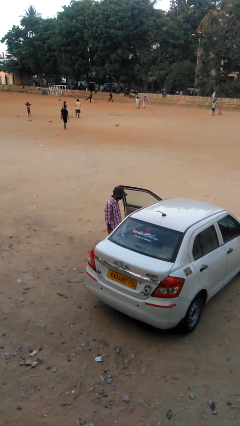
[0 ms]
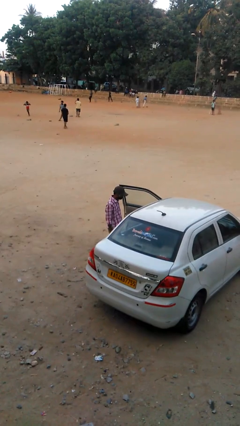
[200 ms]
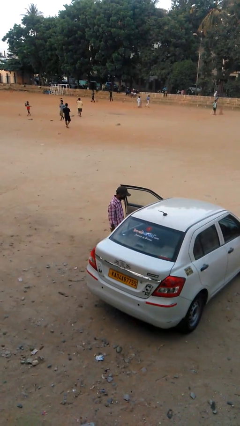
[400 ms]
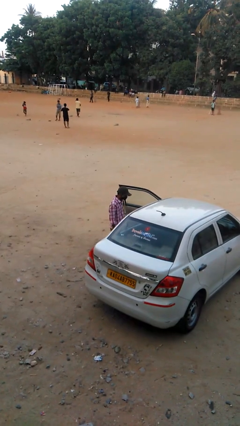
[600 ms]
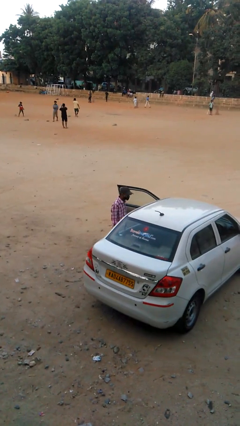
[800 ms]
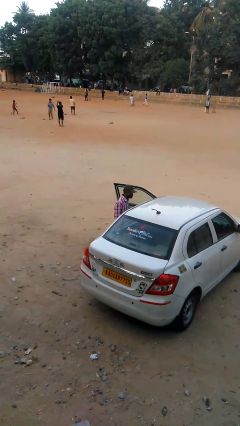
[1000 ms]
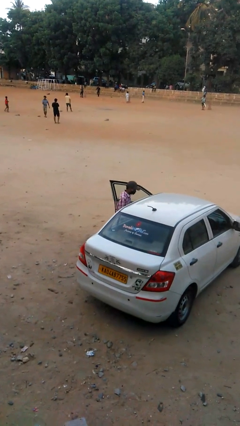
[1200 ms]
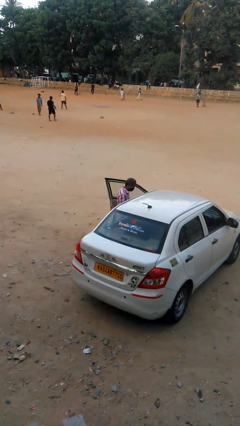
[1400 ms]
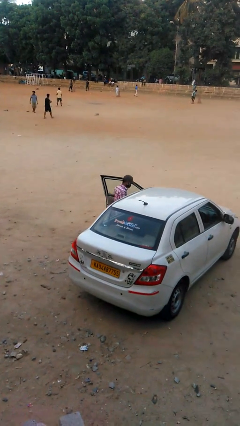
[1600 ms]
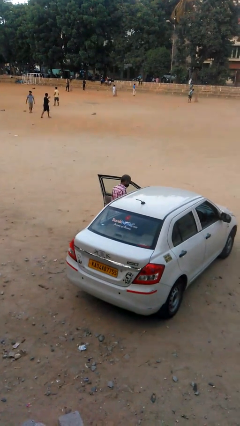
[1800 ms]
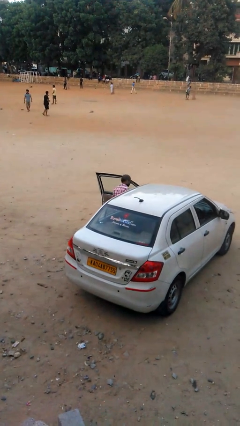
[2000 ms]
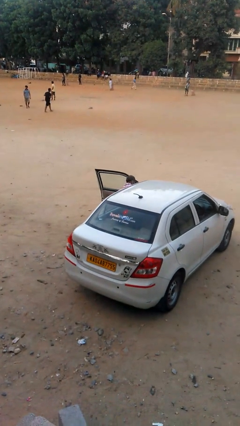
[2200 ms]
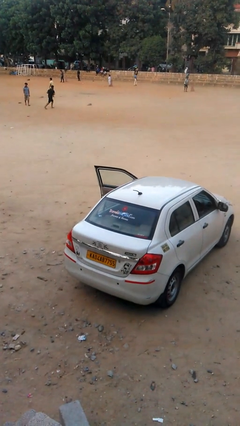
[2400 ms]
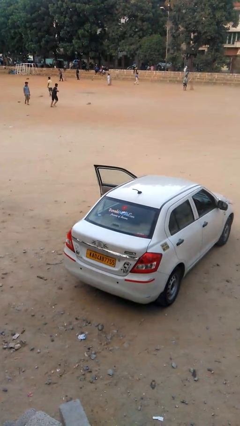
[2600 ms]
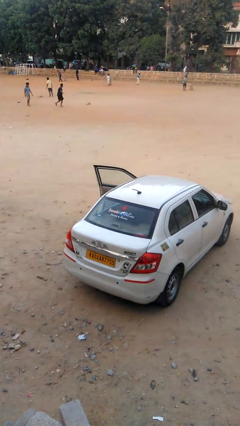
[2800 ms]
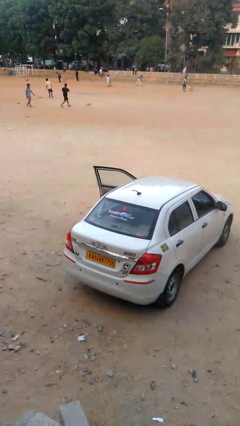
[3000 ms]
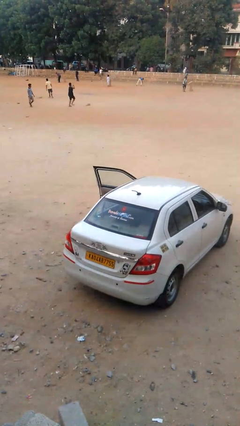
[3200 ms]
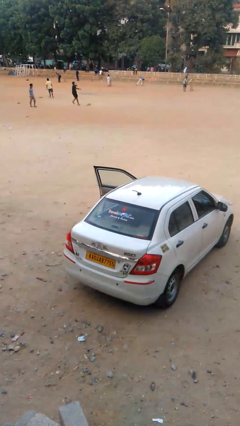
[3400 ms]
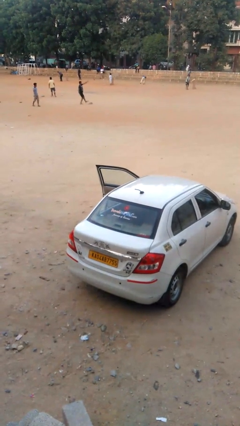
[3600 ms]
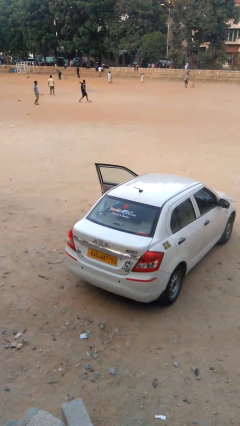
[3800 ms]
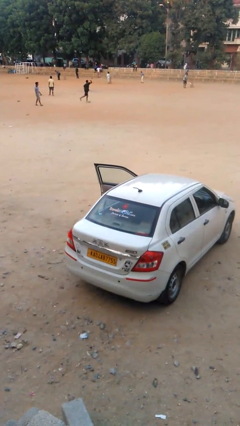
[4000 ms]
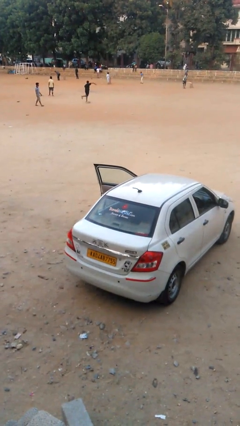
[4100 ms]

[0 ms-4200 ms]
person enters car

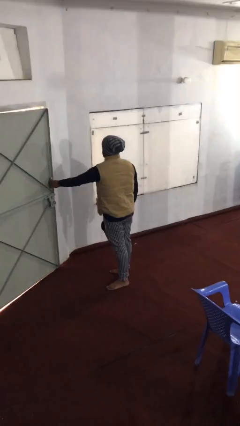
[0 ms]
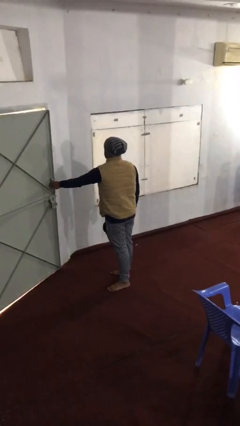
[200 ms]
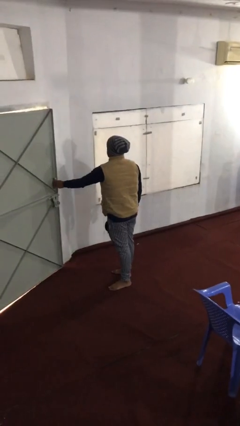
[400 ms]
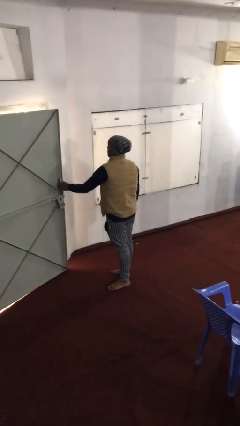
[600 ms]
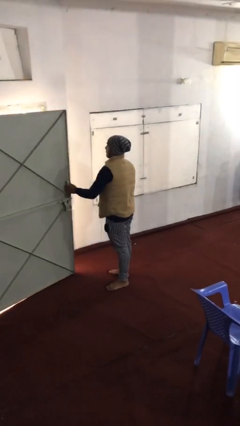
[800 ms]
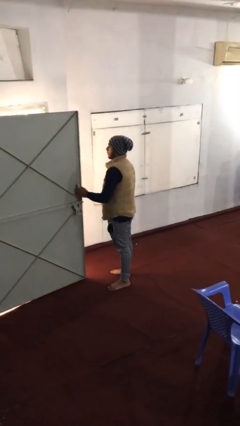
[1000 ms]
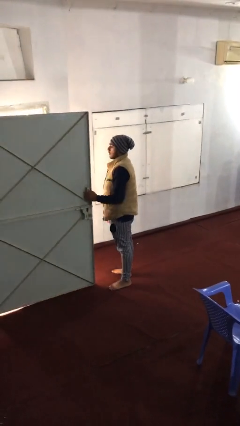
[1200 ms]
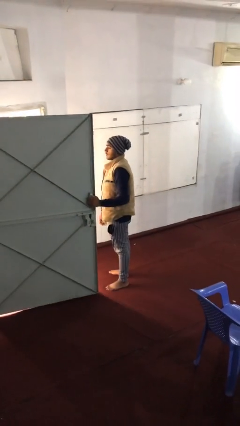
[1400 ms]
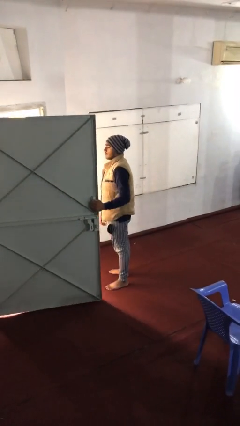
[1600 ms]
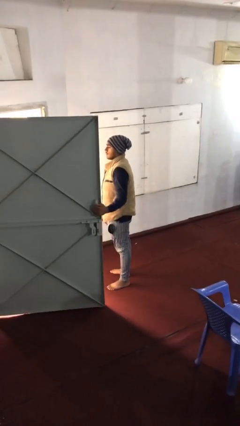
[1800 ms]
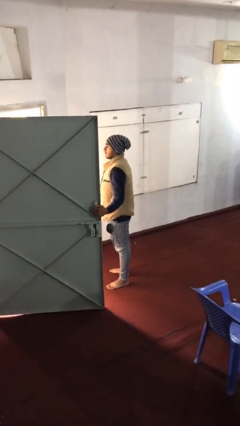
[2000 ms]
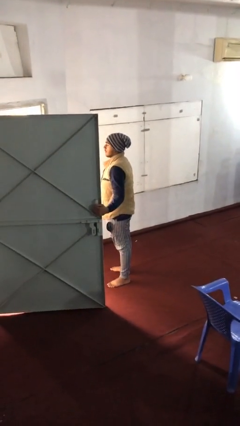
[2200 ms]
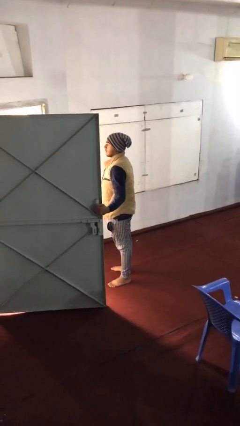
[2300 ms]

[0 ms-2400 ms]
person opens facility door

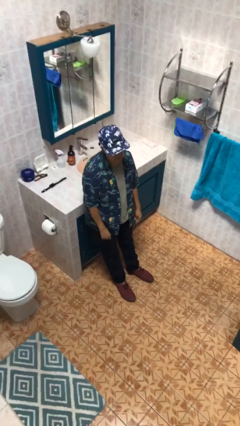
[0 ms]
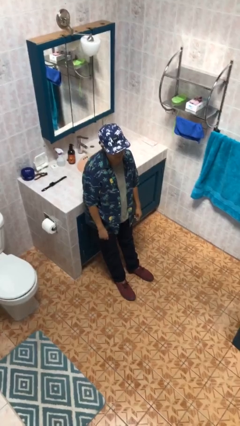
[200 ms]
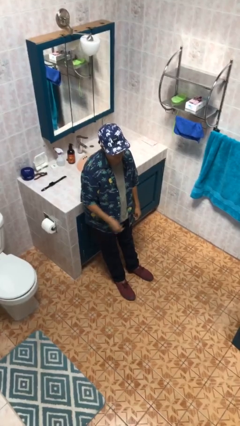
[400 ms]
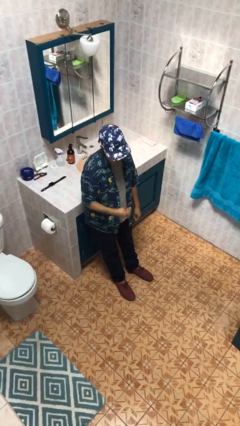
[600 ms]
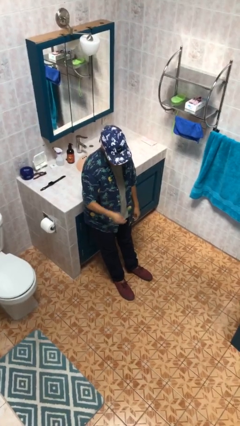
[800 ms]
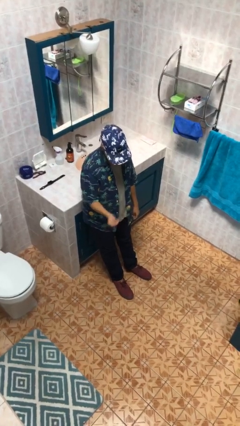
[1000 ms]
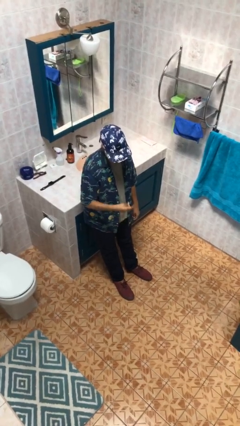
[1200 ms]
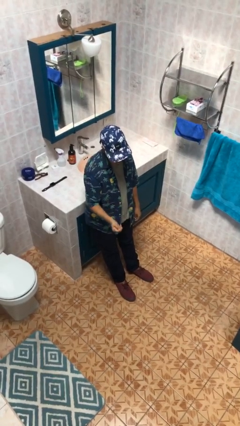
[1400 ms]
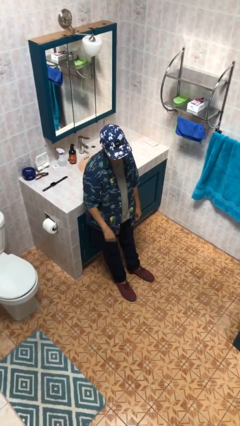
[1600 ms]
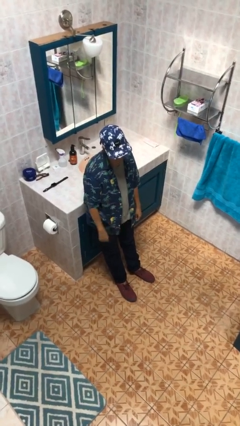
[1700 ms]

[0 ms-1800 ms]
person snaps fingers

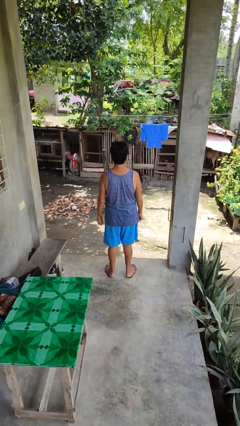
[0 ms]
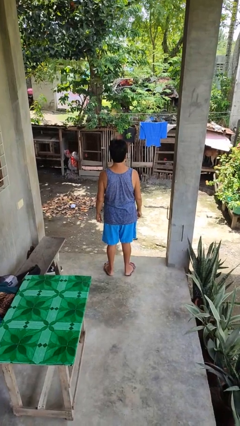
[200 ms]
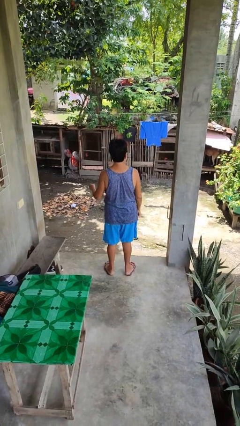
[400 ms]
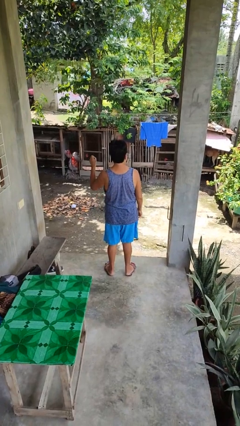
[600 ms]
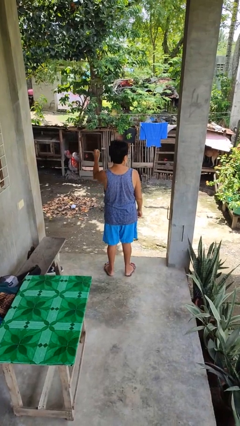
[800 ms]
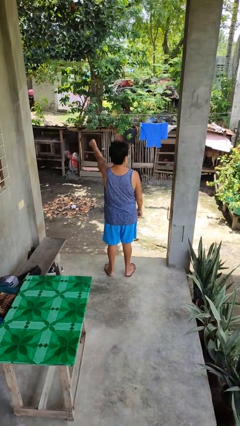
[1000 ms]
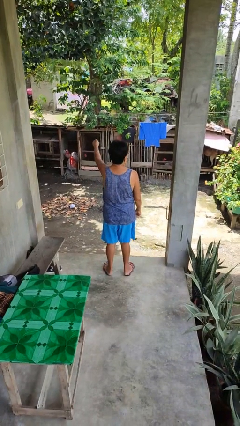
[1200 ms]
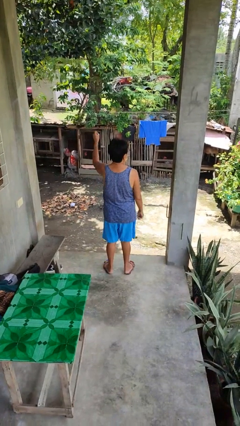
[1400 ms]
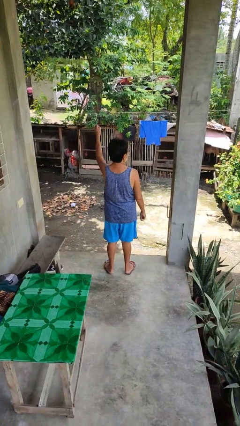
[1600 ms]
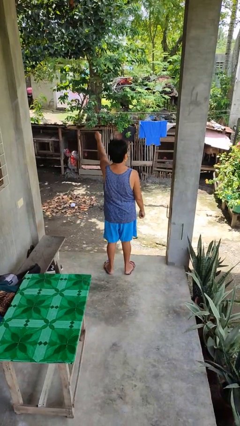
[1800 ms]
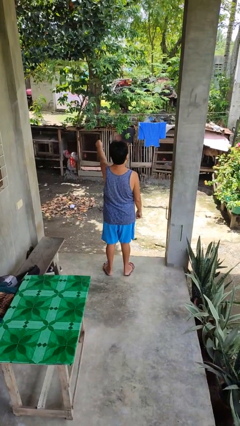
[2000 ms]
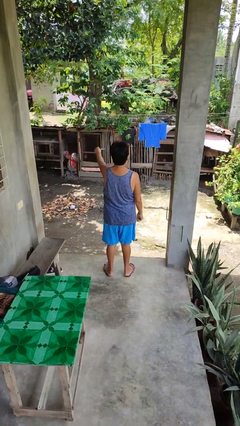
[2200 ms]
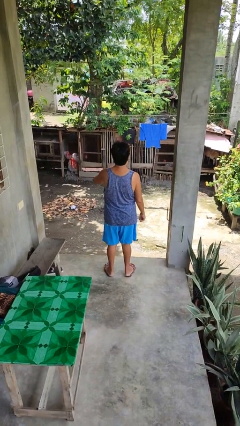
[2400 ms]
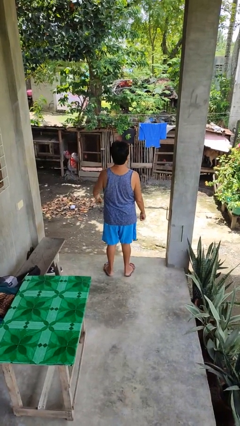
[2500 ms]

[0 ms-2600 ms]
person punches

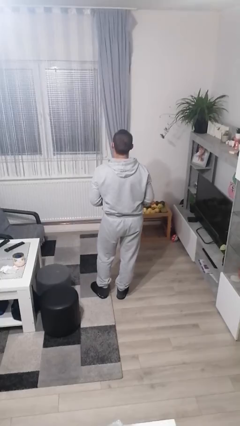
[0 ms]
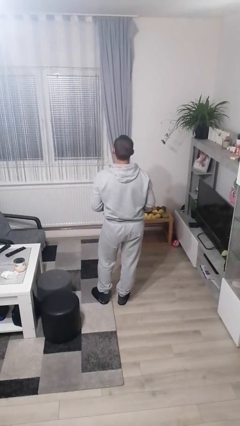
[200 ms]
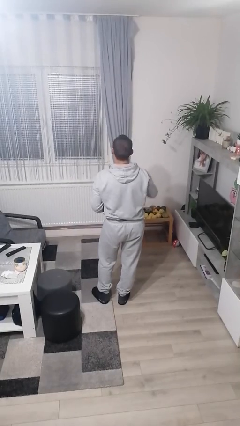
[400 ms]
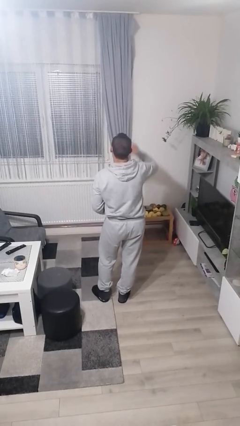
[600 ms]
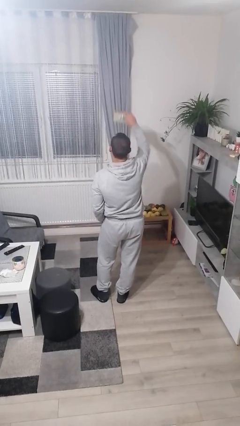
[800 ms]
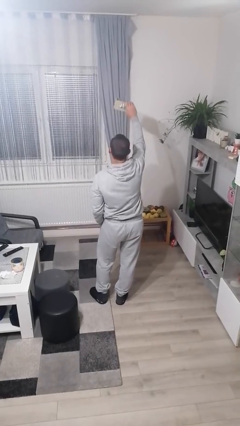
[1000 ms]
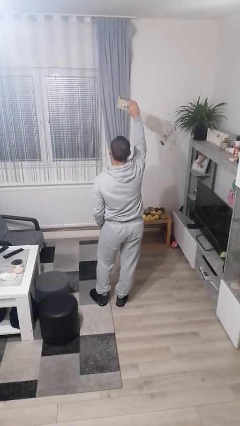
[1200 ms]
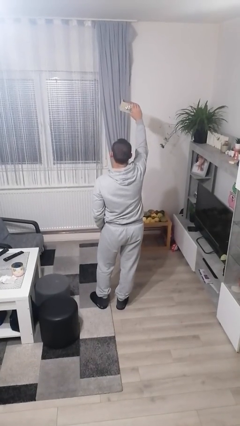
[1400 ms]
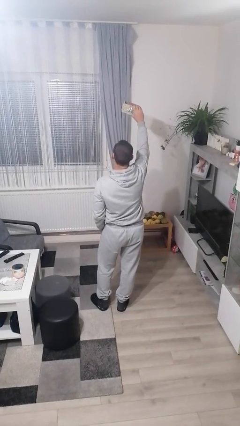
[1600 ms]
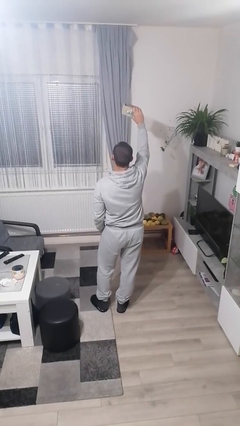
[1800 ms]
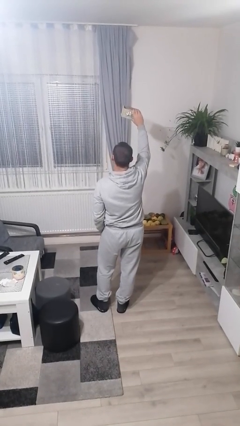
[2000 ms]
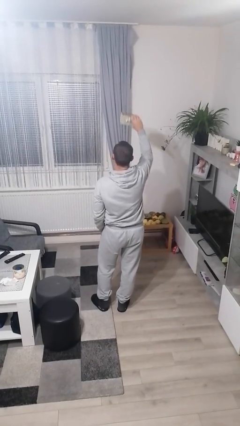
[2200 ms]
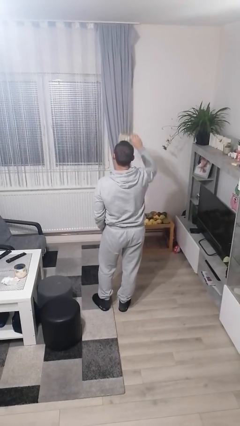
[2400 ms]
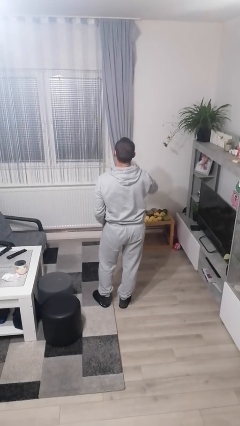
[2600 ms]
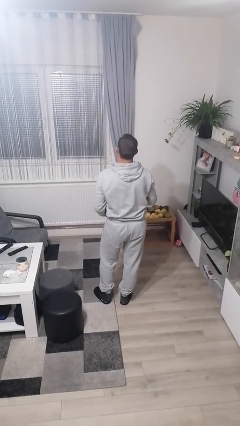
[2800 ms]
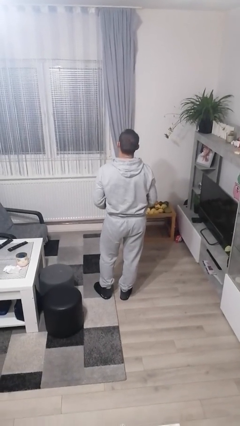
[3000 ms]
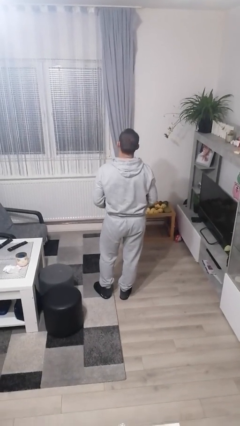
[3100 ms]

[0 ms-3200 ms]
person holds object above head

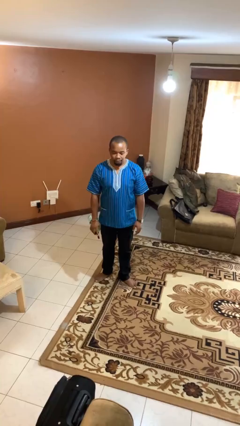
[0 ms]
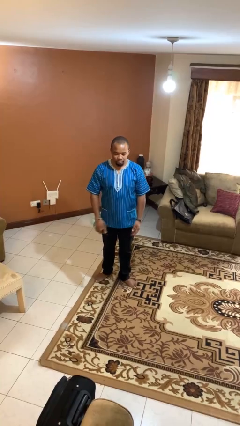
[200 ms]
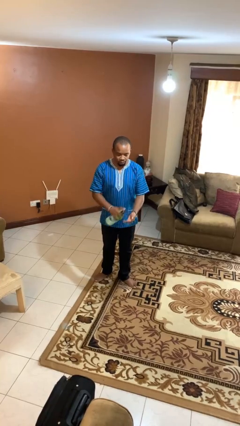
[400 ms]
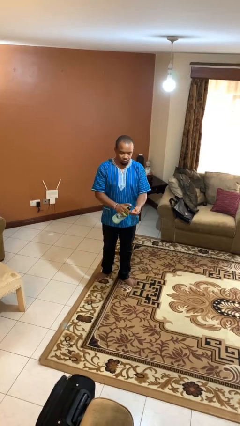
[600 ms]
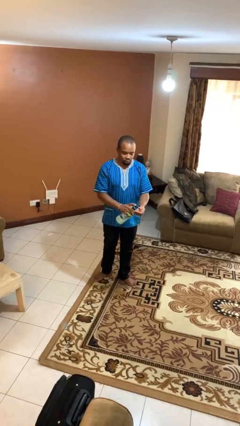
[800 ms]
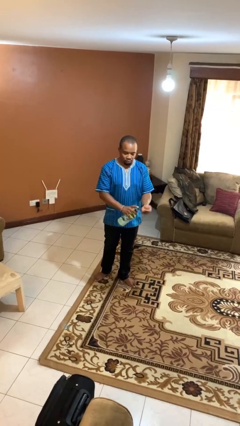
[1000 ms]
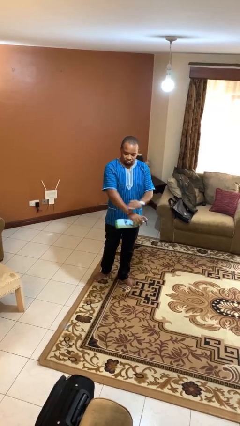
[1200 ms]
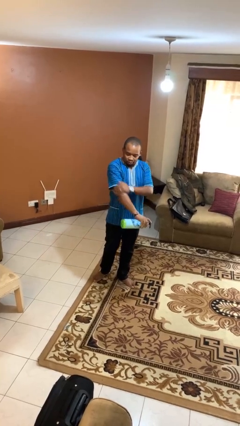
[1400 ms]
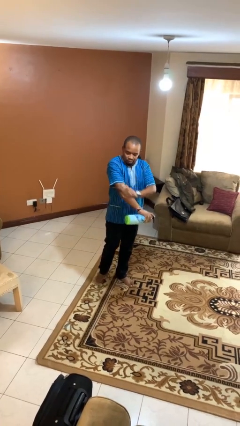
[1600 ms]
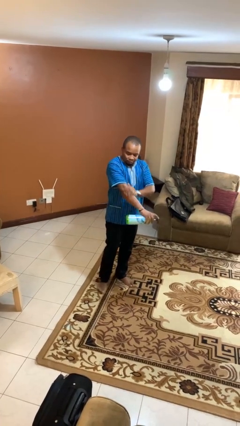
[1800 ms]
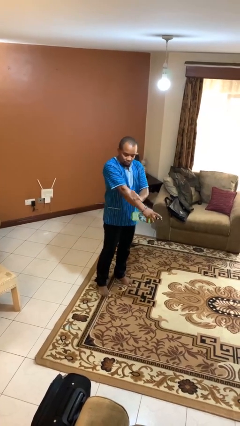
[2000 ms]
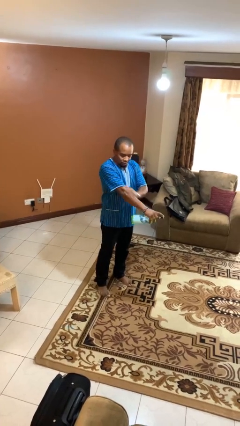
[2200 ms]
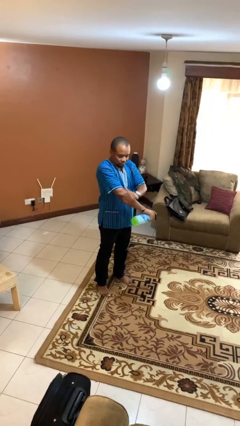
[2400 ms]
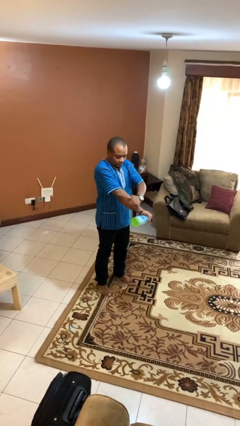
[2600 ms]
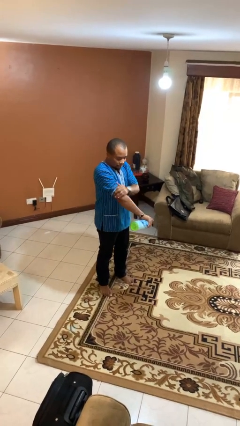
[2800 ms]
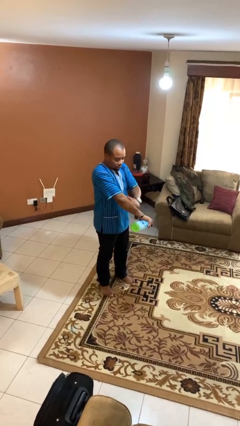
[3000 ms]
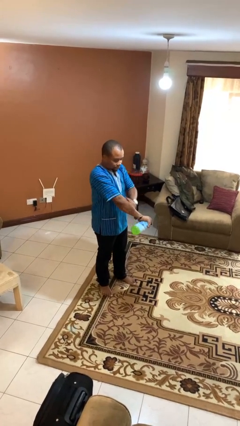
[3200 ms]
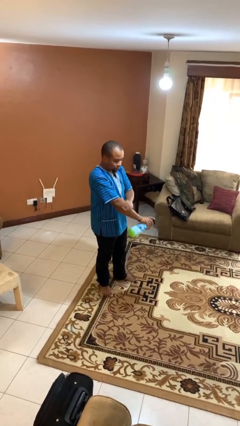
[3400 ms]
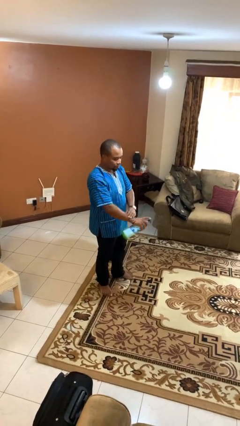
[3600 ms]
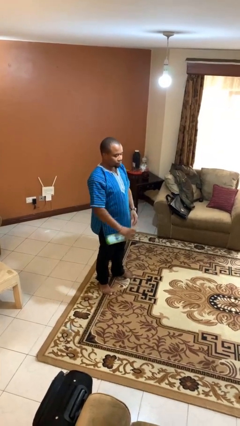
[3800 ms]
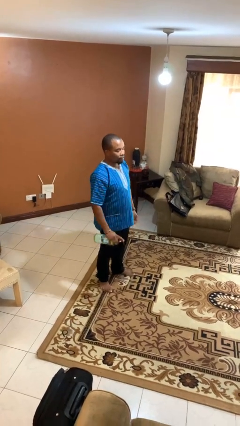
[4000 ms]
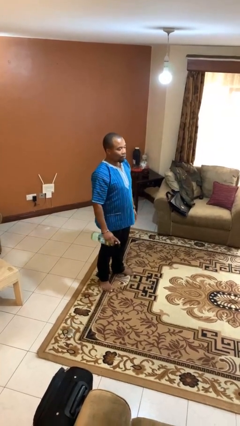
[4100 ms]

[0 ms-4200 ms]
person applies sunscreen
